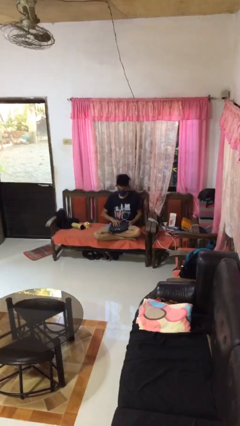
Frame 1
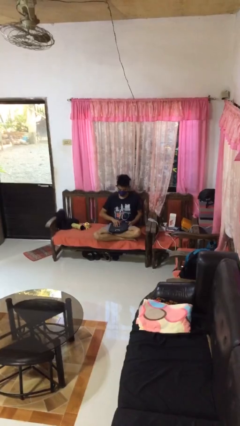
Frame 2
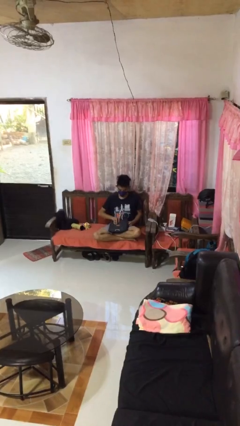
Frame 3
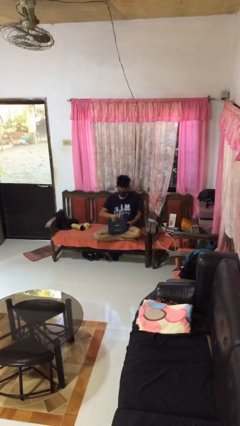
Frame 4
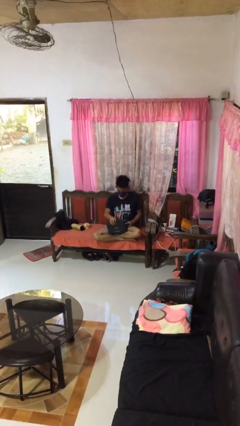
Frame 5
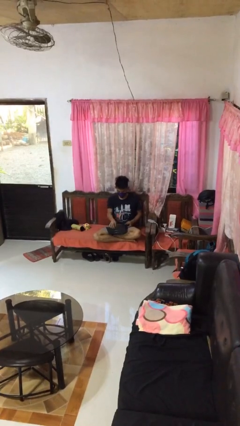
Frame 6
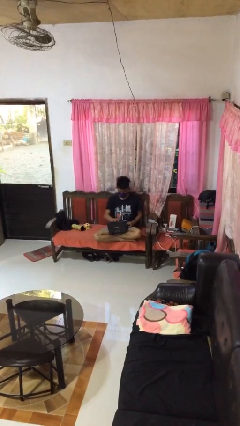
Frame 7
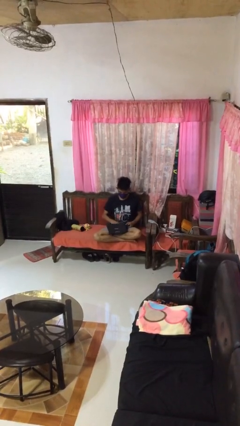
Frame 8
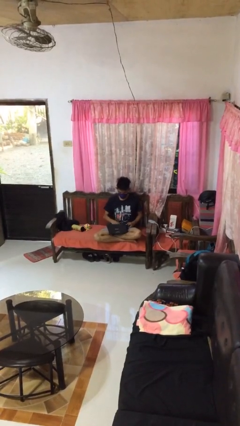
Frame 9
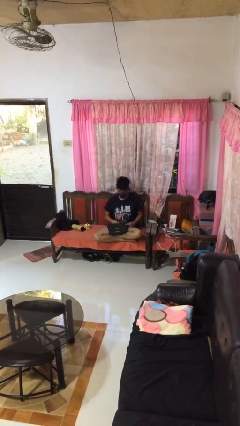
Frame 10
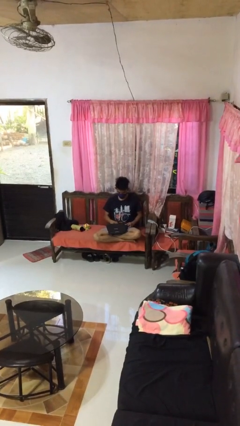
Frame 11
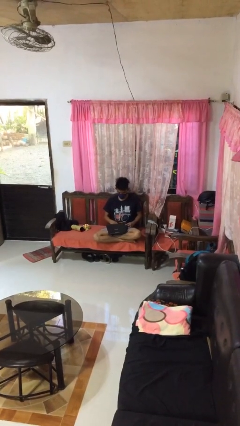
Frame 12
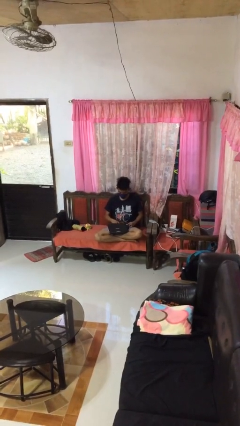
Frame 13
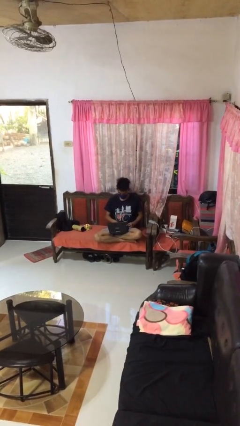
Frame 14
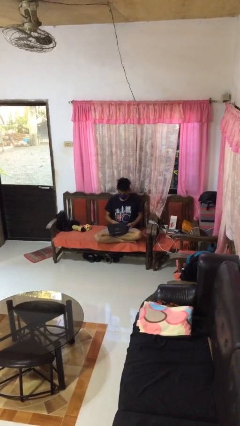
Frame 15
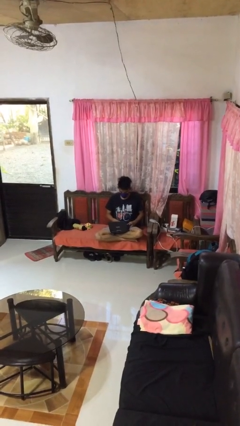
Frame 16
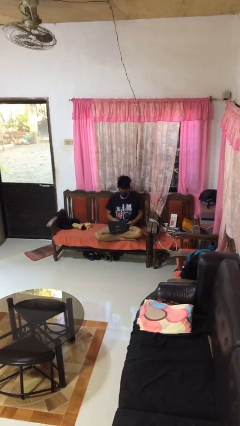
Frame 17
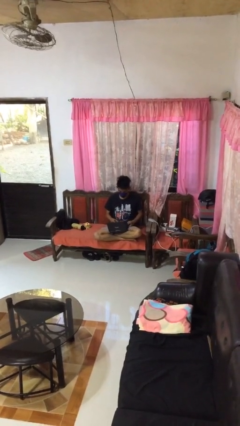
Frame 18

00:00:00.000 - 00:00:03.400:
person opens laptop

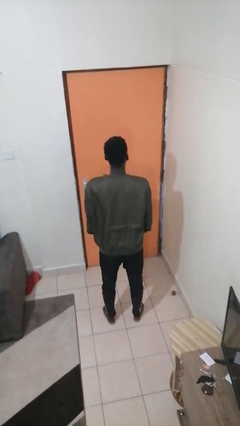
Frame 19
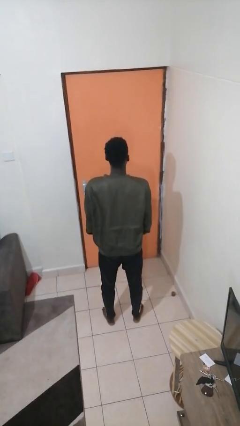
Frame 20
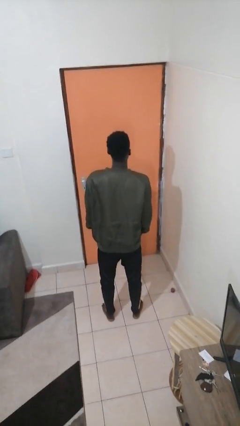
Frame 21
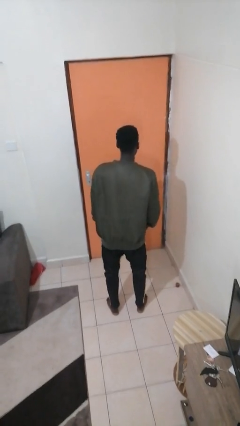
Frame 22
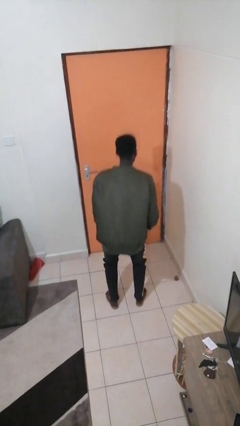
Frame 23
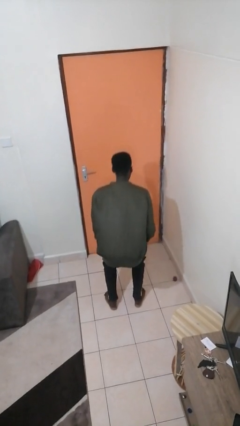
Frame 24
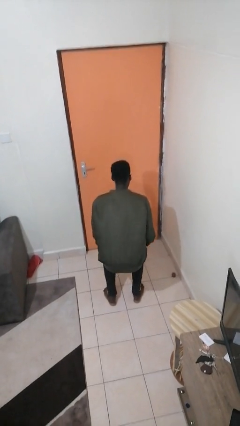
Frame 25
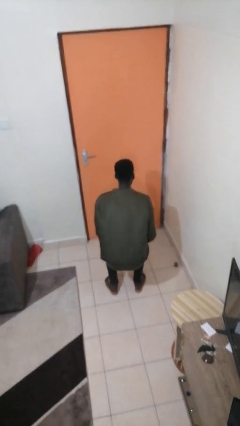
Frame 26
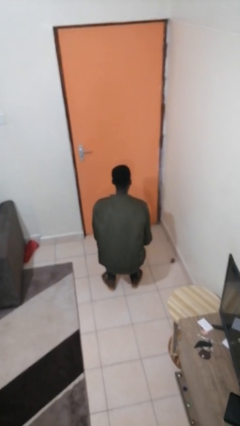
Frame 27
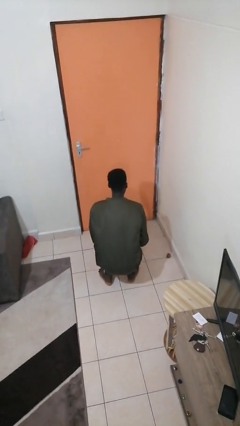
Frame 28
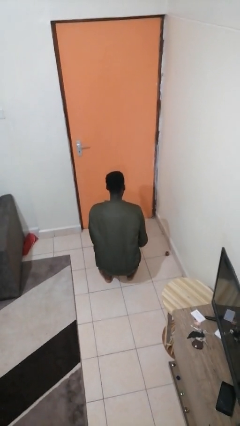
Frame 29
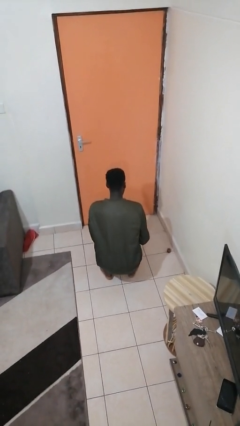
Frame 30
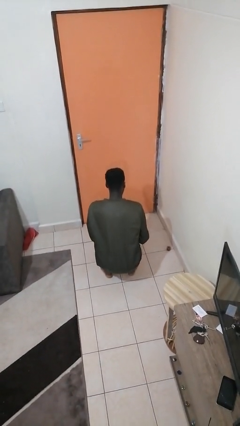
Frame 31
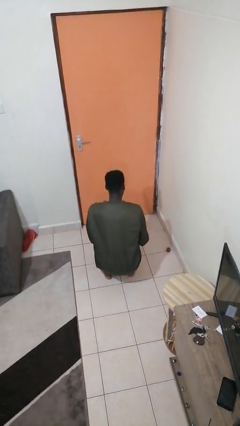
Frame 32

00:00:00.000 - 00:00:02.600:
person squats

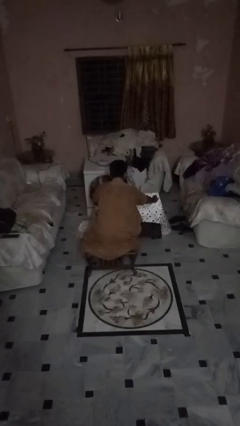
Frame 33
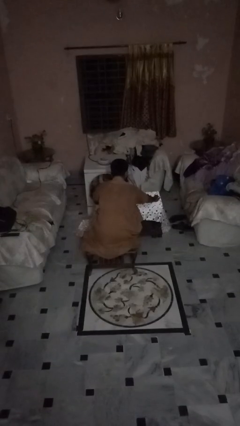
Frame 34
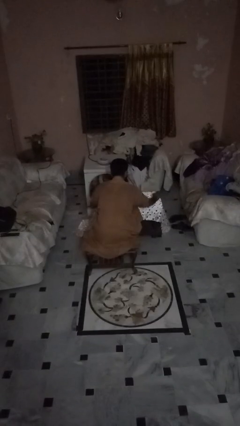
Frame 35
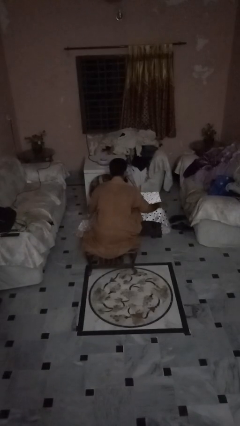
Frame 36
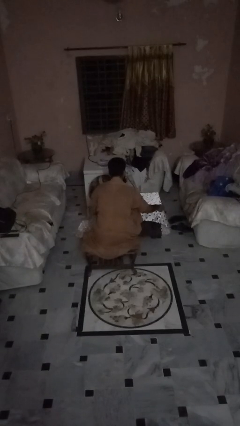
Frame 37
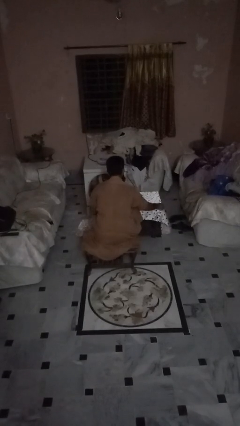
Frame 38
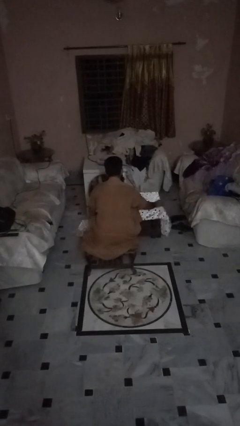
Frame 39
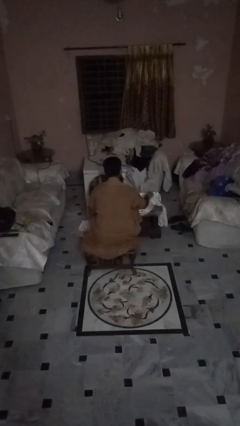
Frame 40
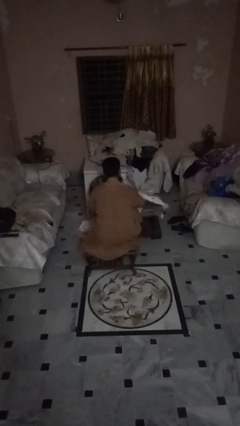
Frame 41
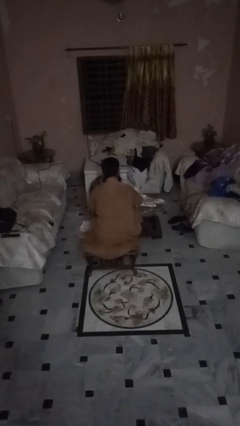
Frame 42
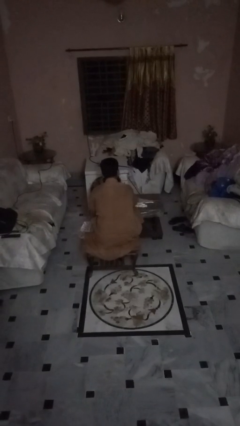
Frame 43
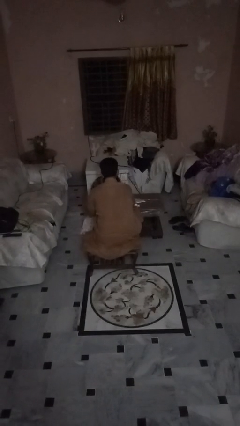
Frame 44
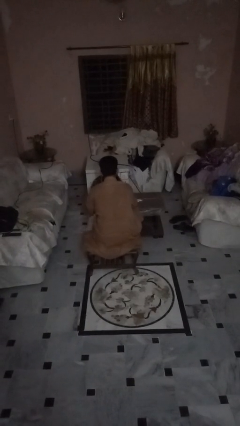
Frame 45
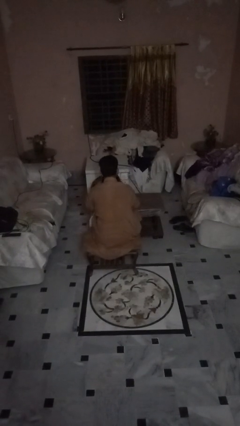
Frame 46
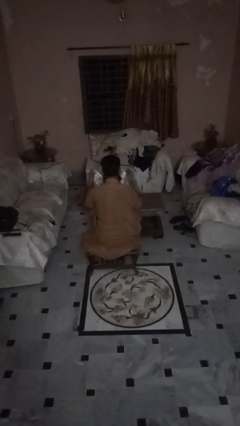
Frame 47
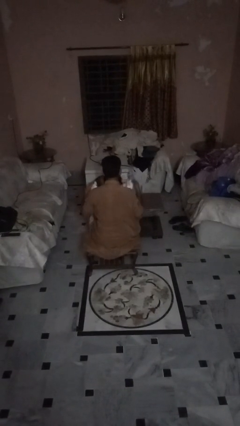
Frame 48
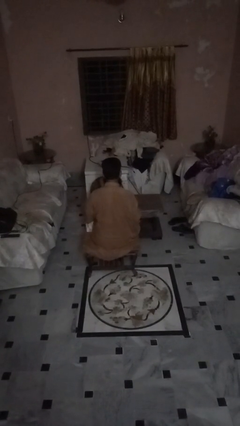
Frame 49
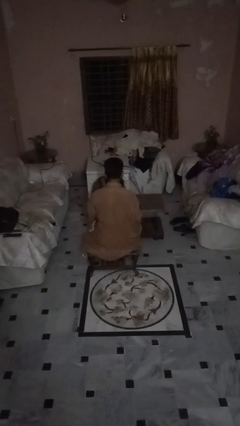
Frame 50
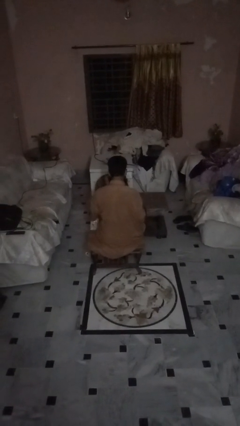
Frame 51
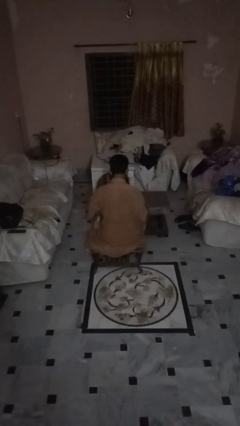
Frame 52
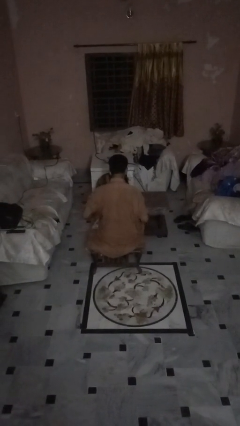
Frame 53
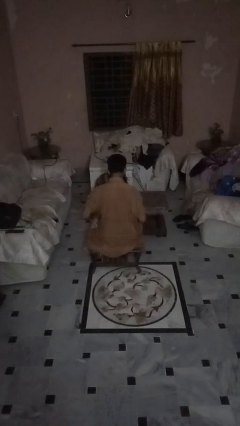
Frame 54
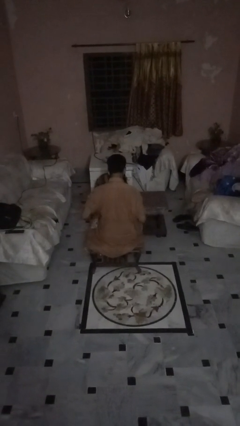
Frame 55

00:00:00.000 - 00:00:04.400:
person folds tablecloth

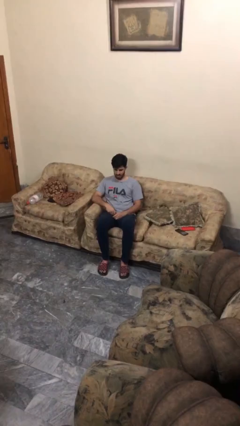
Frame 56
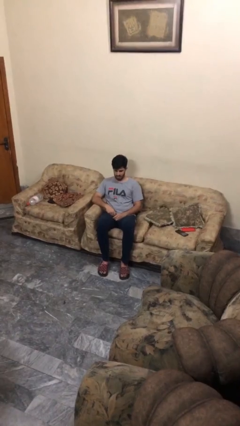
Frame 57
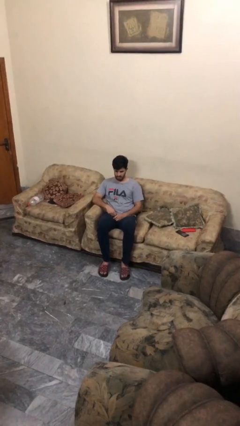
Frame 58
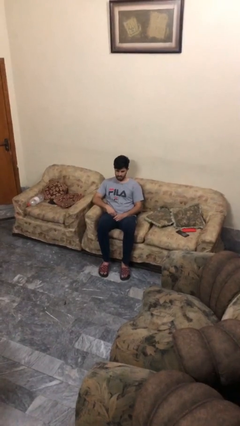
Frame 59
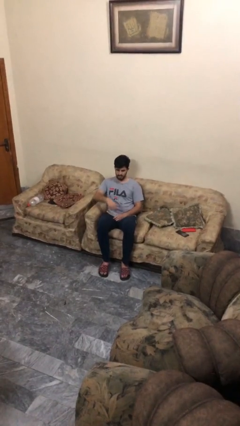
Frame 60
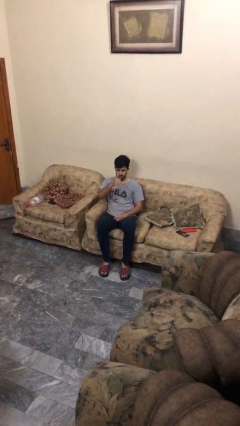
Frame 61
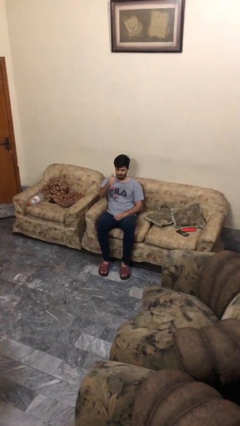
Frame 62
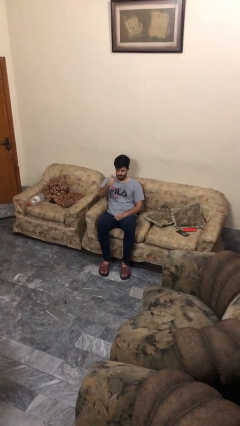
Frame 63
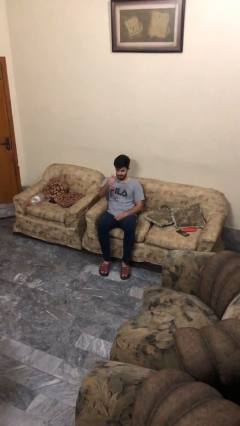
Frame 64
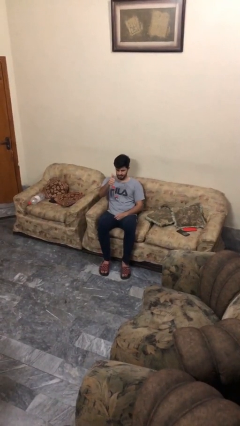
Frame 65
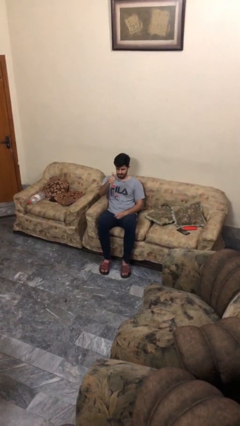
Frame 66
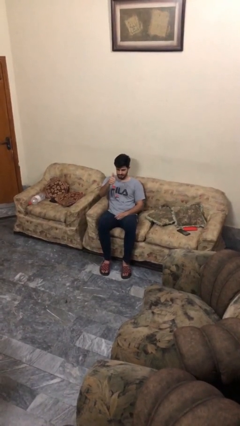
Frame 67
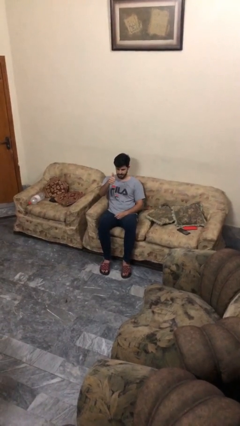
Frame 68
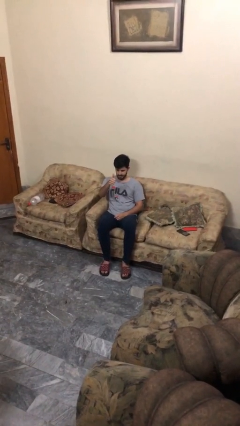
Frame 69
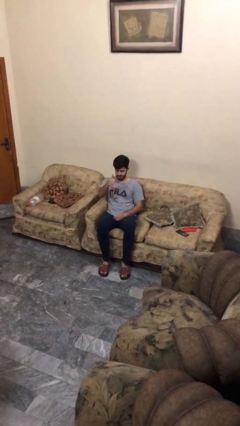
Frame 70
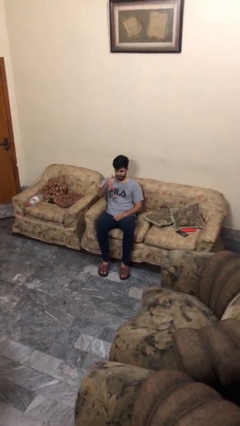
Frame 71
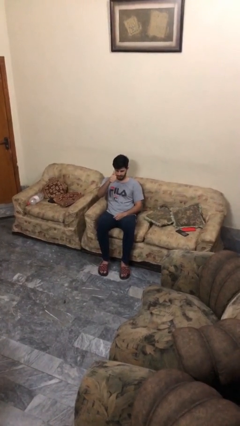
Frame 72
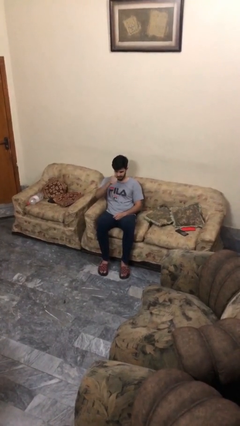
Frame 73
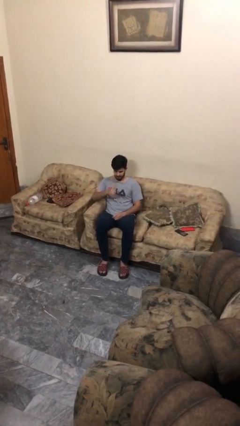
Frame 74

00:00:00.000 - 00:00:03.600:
person gestures thumbs up

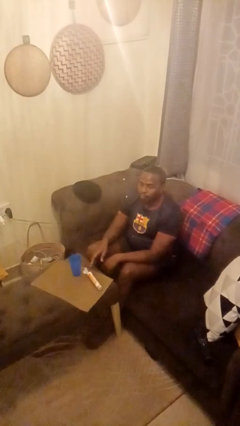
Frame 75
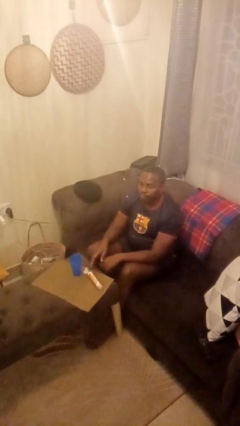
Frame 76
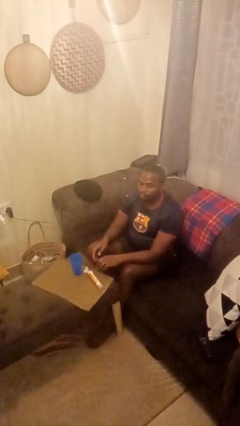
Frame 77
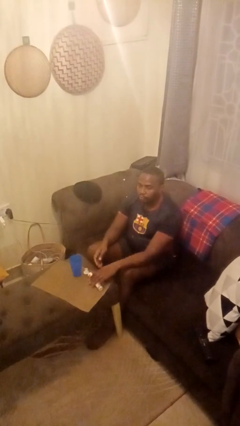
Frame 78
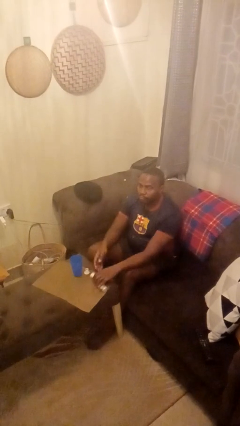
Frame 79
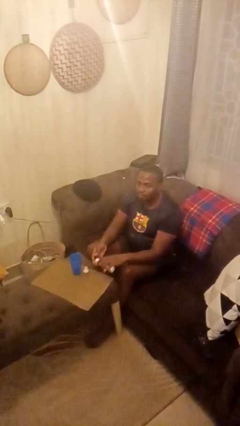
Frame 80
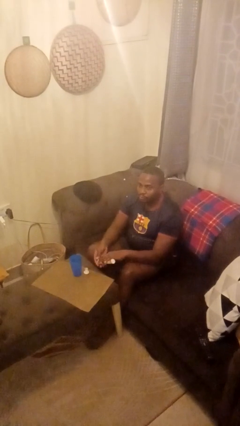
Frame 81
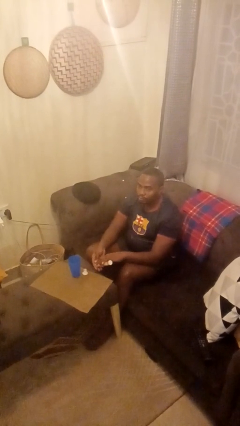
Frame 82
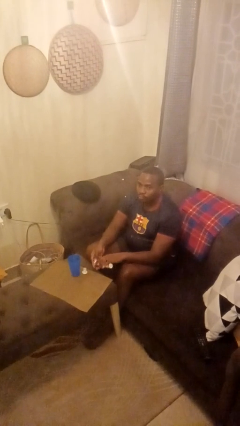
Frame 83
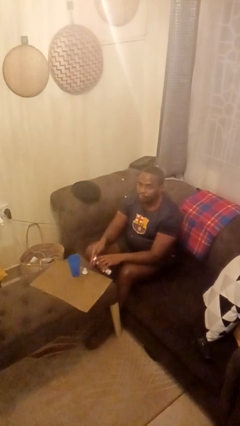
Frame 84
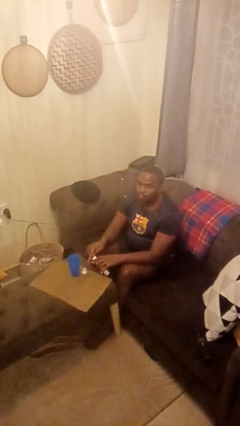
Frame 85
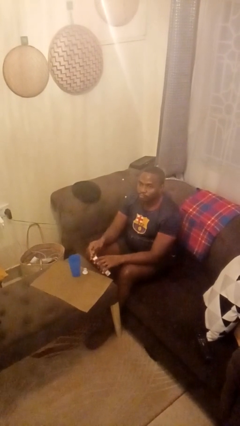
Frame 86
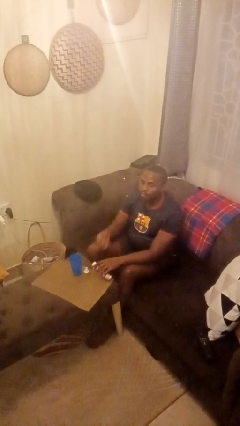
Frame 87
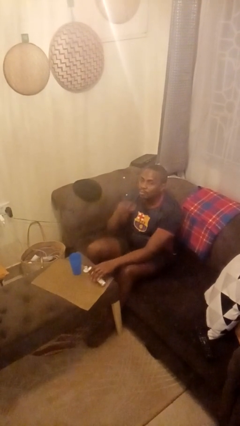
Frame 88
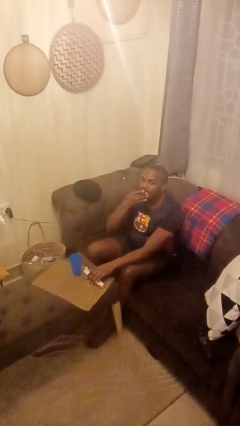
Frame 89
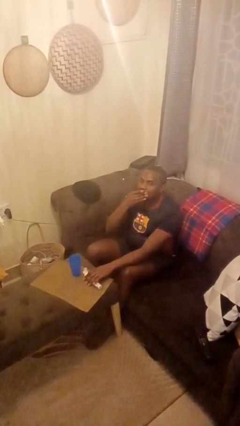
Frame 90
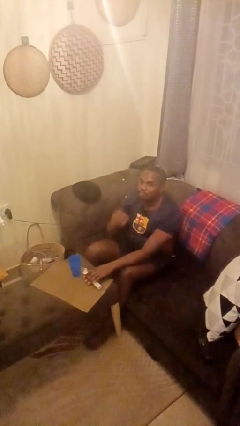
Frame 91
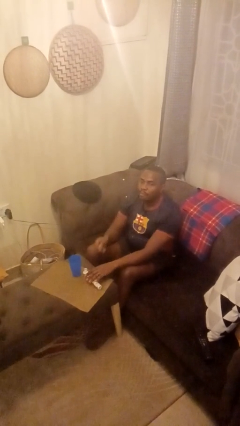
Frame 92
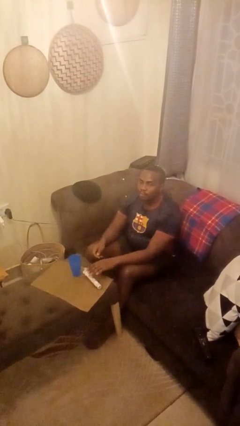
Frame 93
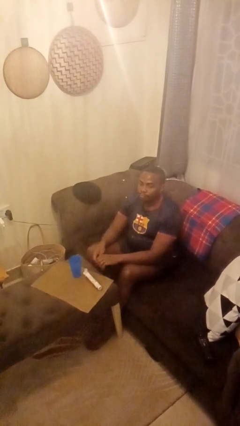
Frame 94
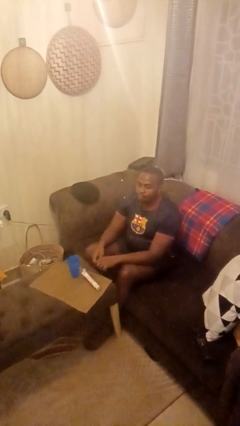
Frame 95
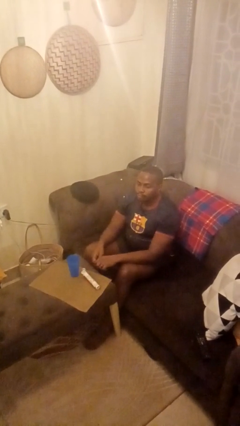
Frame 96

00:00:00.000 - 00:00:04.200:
person takes medicine pills
